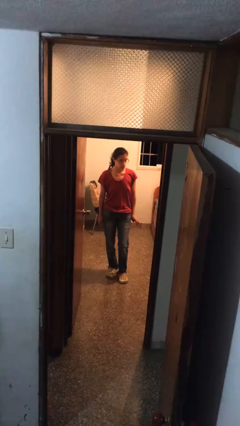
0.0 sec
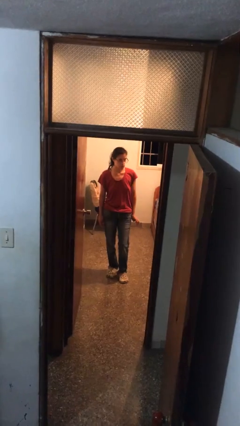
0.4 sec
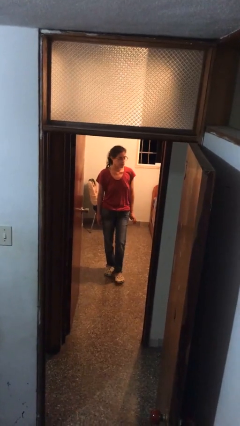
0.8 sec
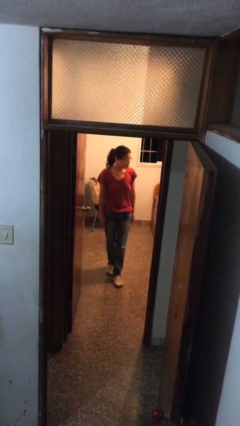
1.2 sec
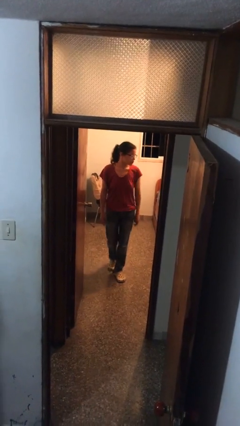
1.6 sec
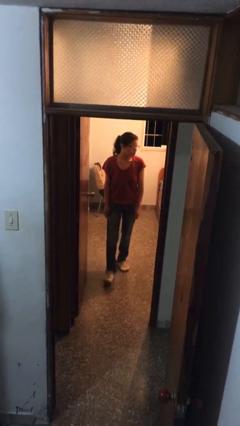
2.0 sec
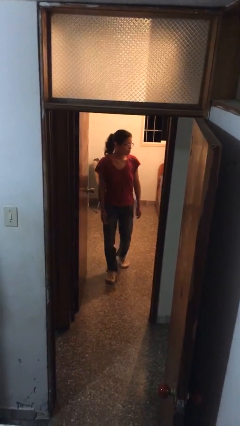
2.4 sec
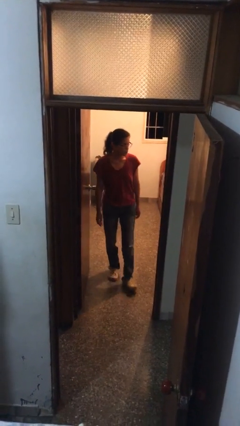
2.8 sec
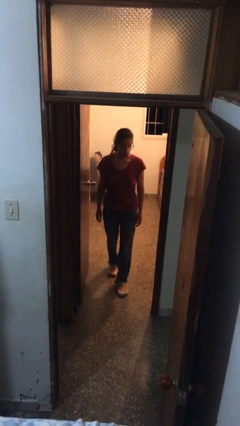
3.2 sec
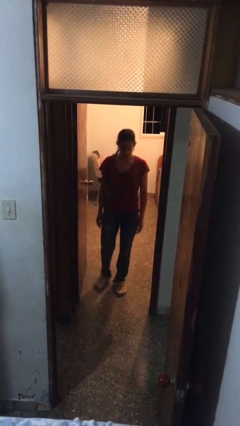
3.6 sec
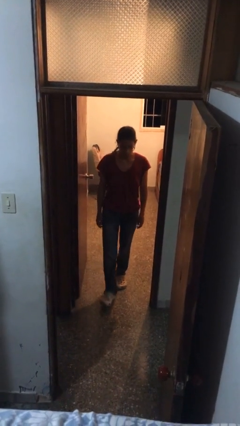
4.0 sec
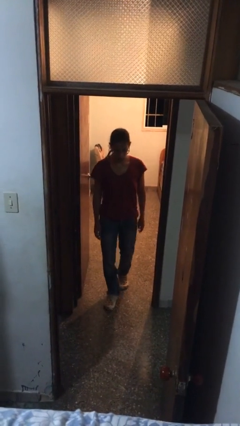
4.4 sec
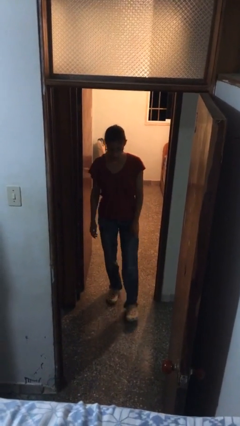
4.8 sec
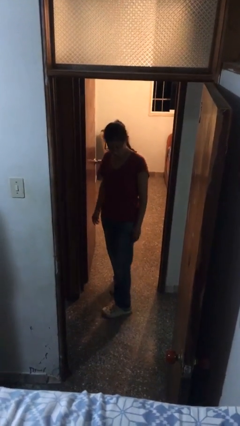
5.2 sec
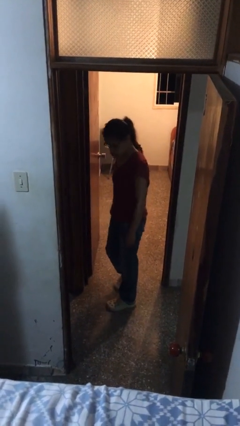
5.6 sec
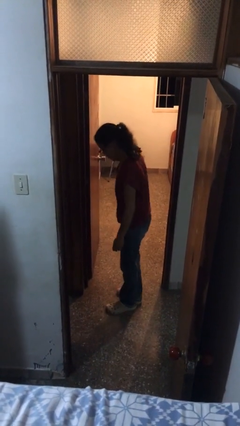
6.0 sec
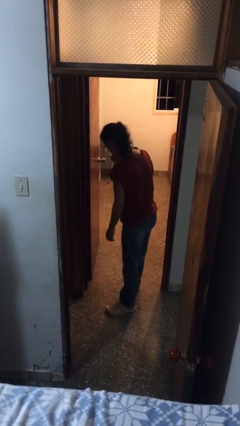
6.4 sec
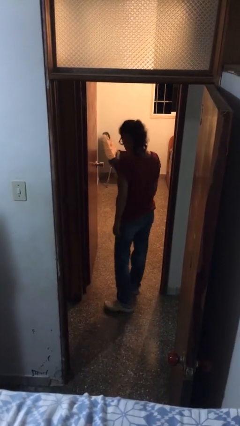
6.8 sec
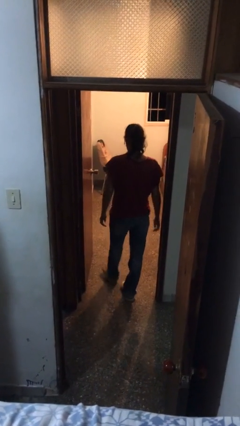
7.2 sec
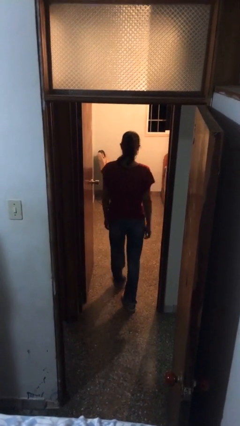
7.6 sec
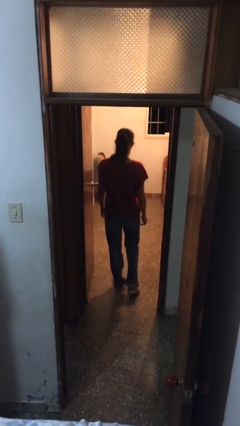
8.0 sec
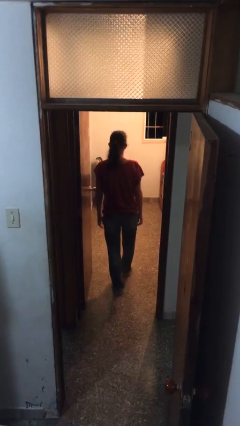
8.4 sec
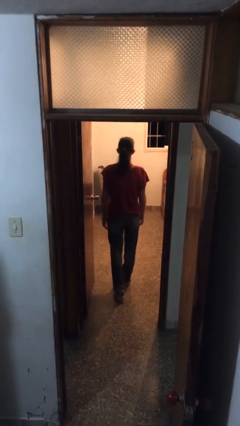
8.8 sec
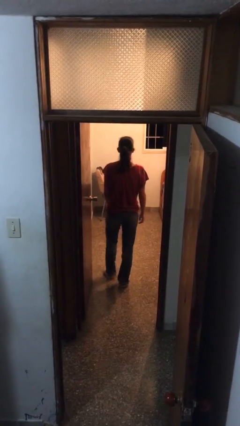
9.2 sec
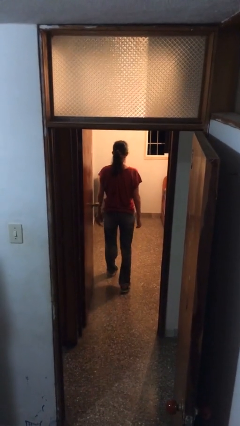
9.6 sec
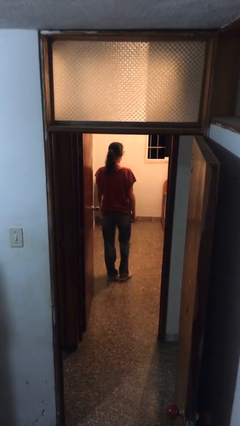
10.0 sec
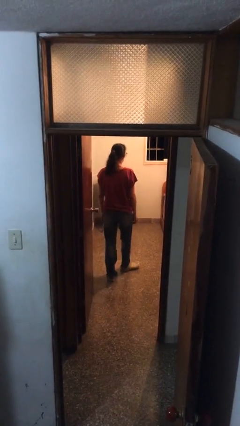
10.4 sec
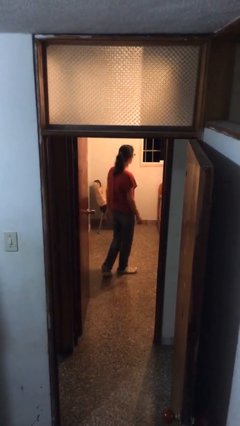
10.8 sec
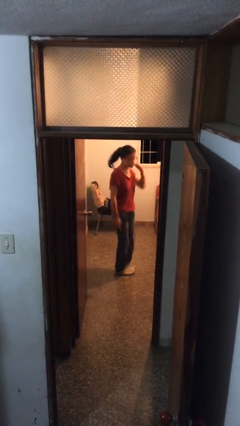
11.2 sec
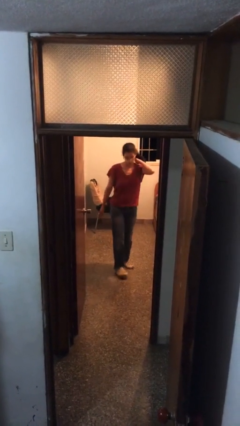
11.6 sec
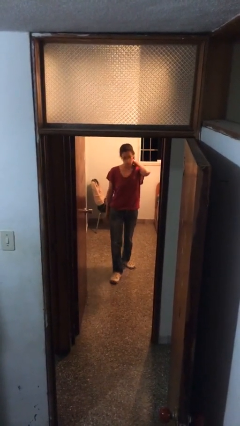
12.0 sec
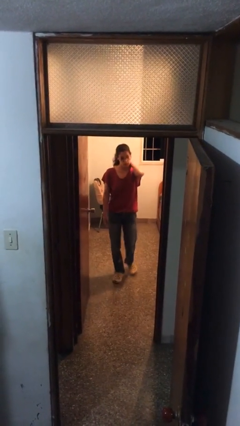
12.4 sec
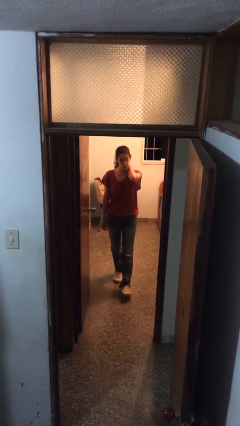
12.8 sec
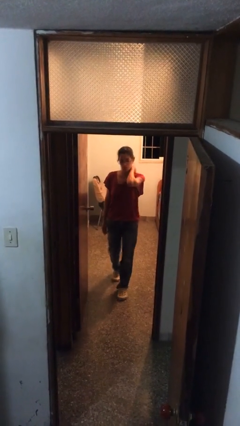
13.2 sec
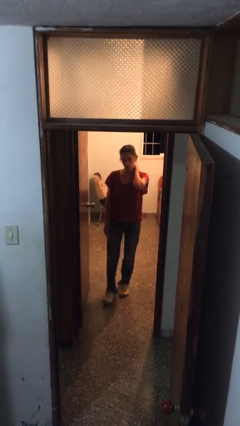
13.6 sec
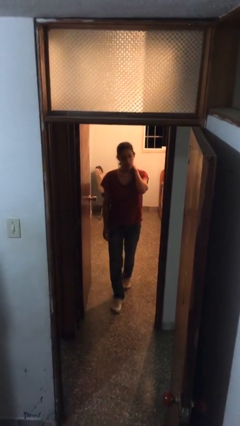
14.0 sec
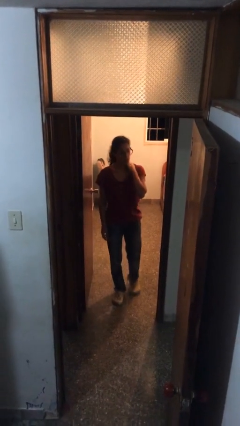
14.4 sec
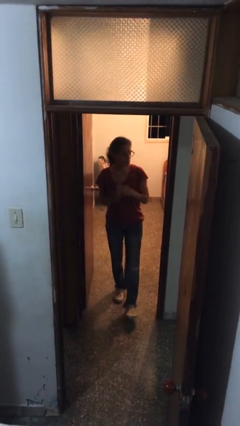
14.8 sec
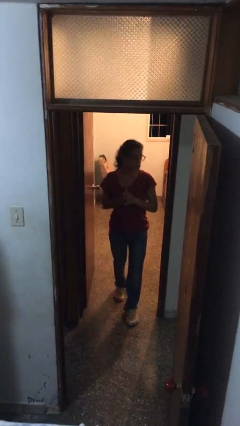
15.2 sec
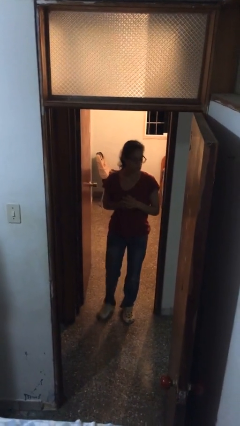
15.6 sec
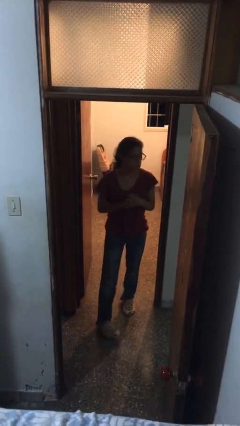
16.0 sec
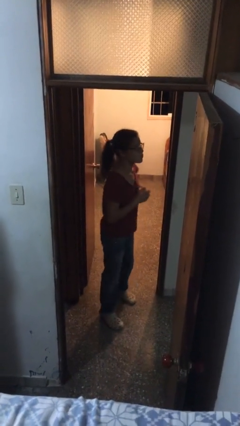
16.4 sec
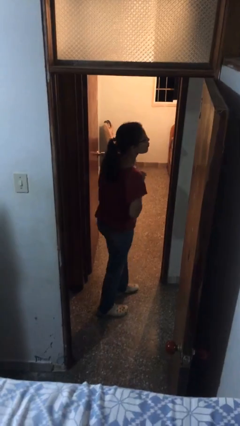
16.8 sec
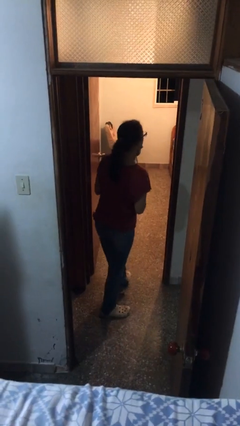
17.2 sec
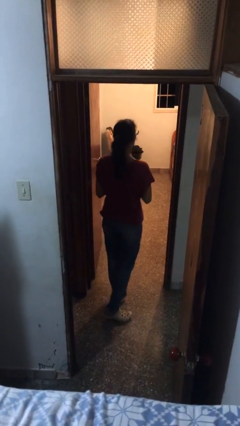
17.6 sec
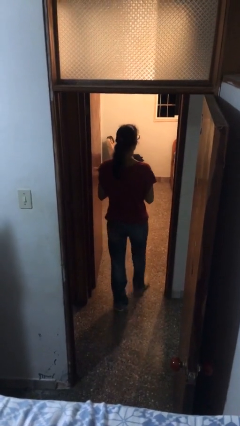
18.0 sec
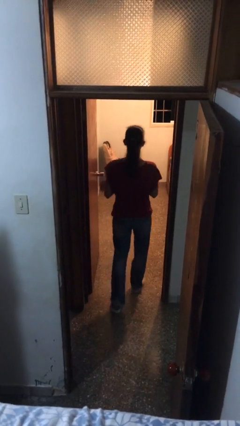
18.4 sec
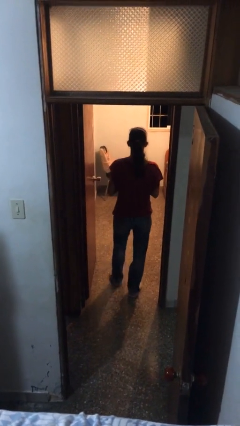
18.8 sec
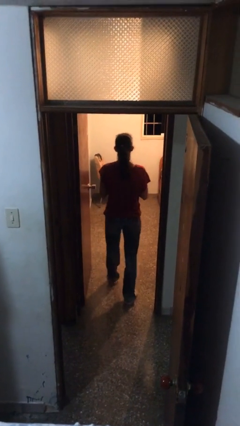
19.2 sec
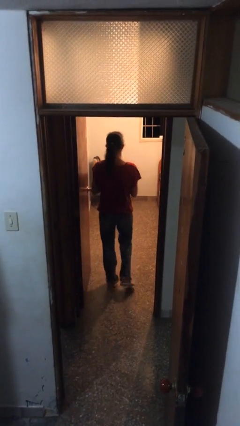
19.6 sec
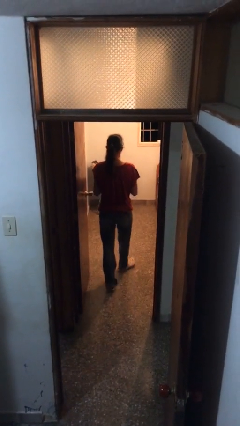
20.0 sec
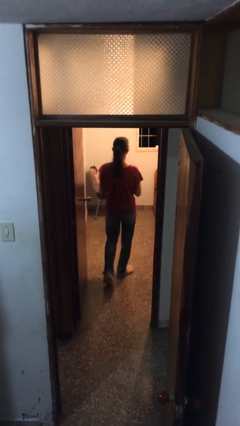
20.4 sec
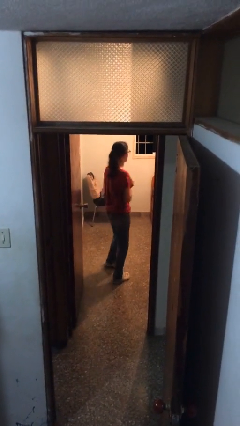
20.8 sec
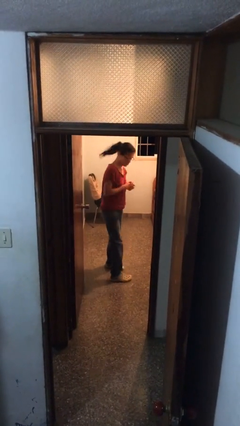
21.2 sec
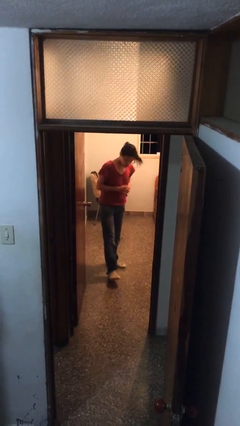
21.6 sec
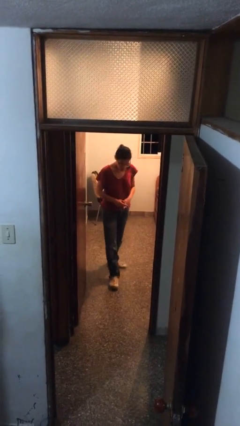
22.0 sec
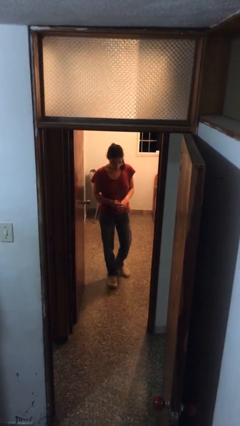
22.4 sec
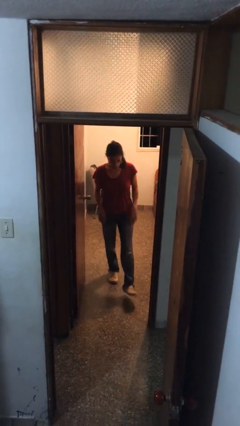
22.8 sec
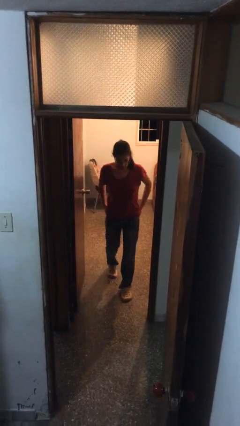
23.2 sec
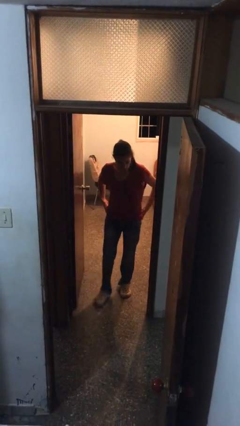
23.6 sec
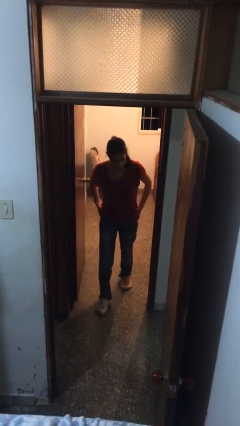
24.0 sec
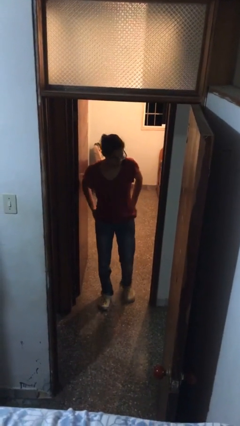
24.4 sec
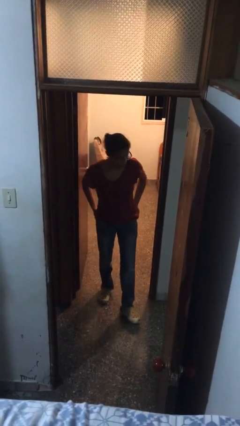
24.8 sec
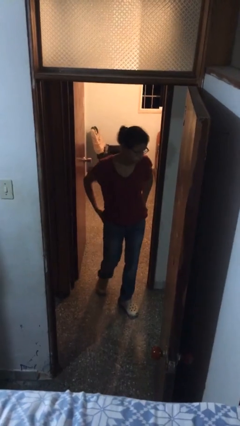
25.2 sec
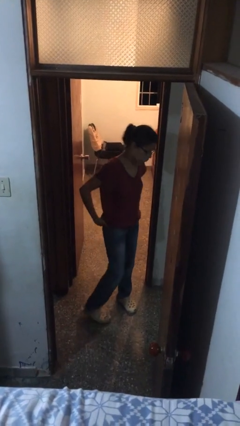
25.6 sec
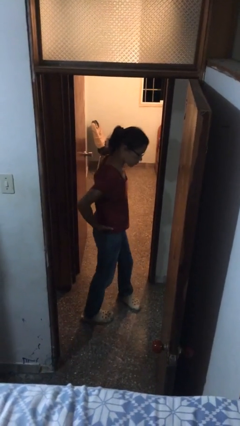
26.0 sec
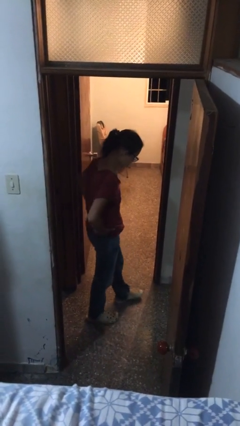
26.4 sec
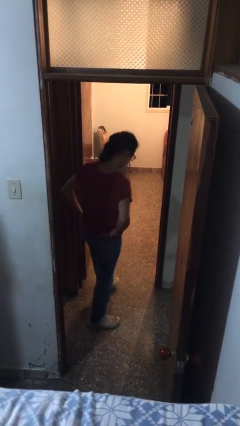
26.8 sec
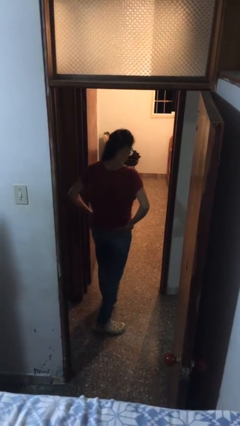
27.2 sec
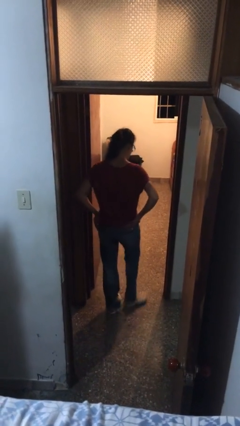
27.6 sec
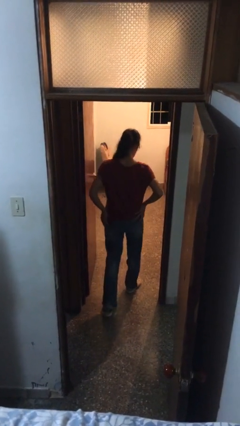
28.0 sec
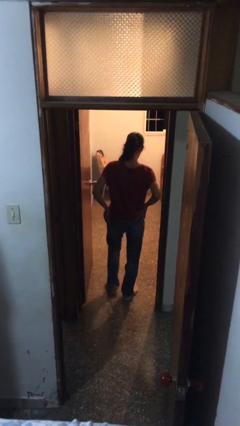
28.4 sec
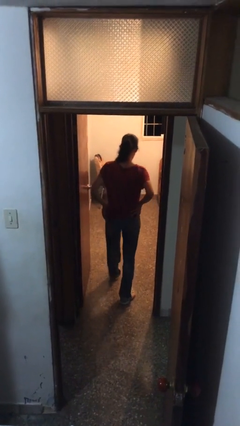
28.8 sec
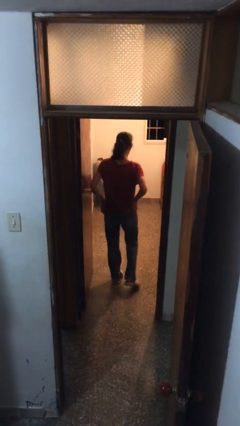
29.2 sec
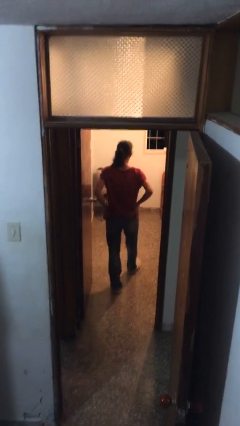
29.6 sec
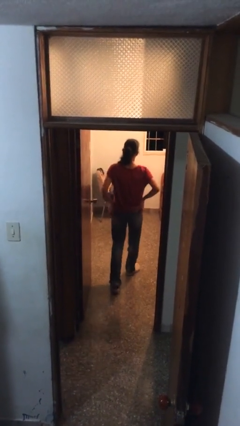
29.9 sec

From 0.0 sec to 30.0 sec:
person walks

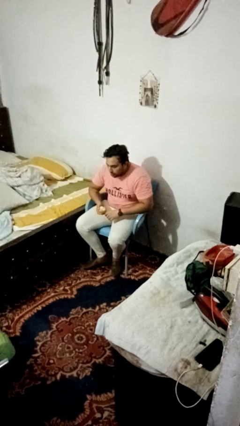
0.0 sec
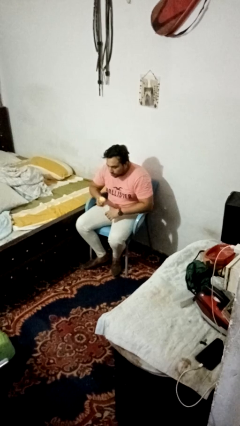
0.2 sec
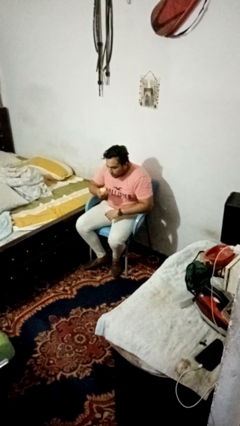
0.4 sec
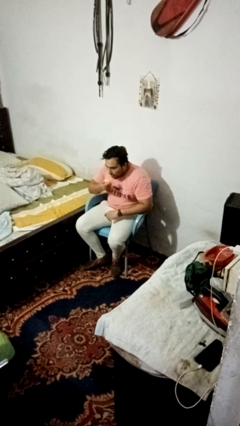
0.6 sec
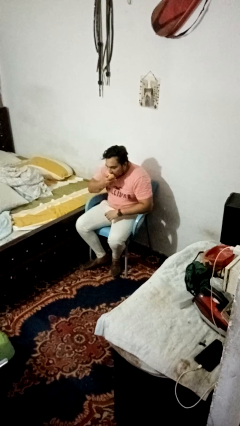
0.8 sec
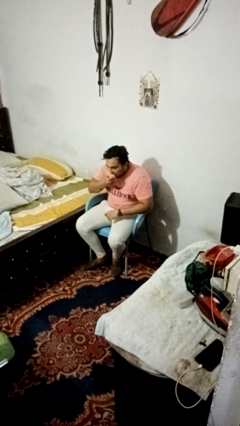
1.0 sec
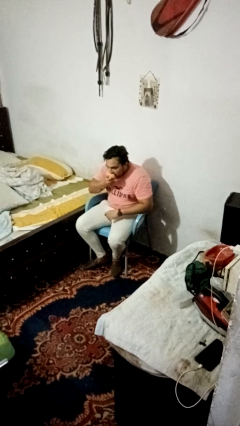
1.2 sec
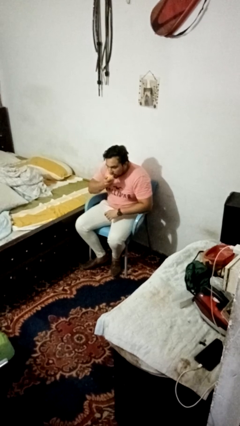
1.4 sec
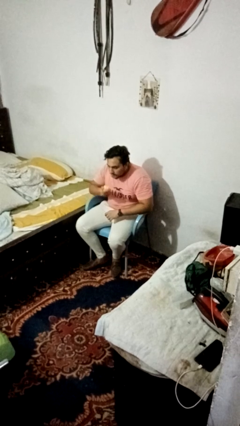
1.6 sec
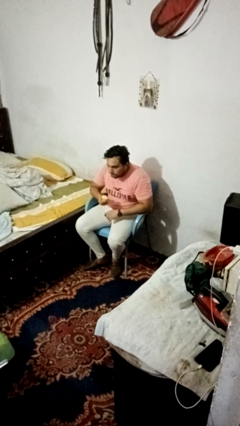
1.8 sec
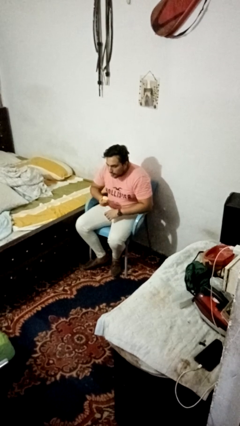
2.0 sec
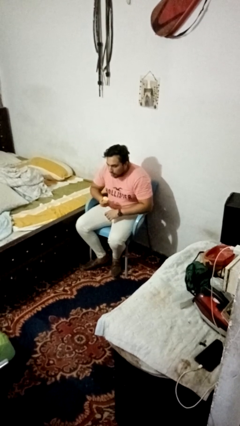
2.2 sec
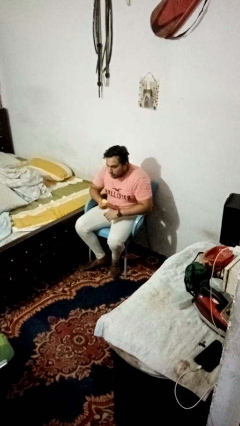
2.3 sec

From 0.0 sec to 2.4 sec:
person eats apple

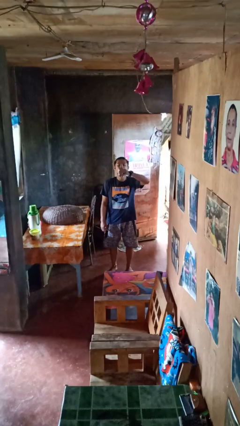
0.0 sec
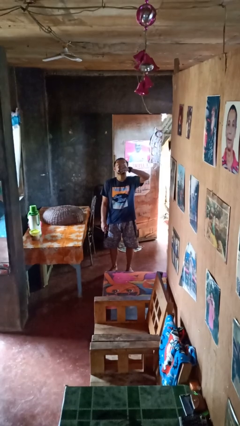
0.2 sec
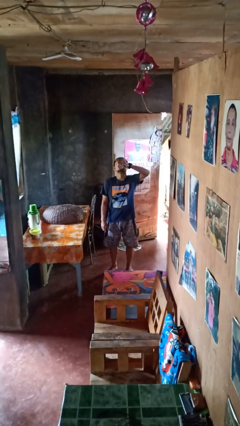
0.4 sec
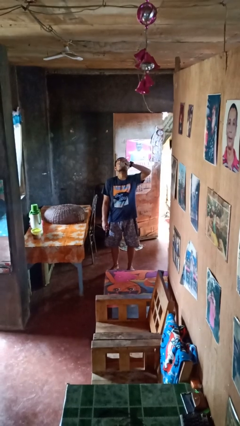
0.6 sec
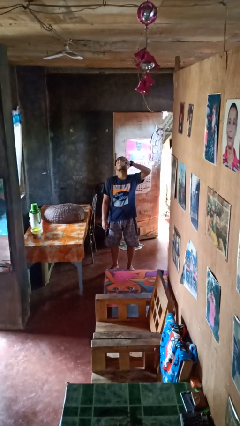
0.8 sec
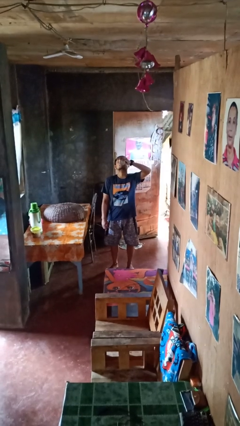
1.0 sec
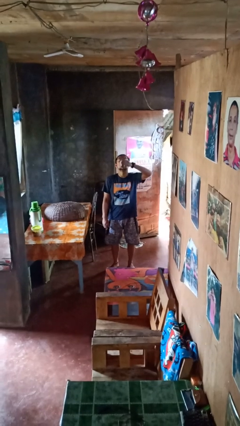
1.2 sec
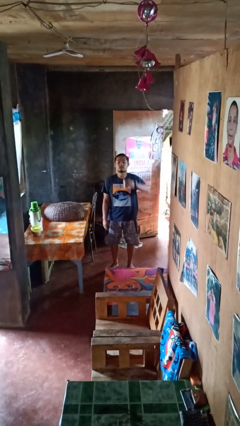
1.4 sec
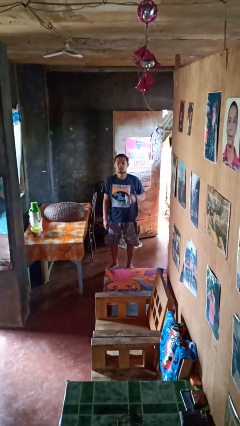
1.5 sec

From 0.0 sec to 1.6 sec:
person drinks from beverage can
